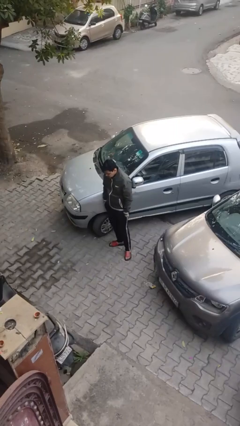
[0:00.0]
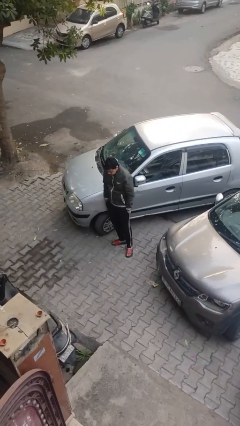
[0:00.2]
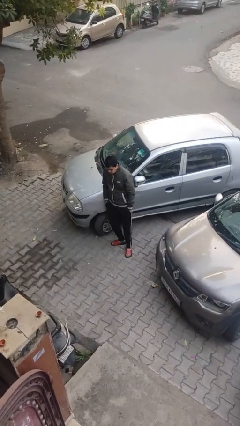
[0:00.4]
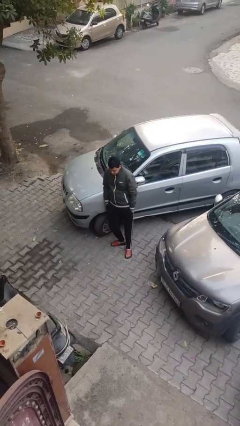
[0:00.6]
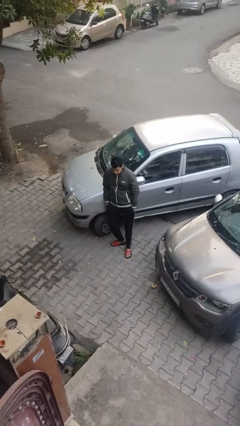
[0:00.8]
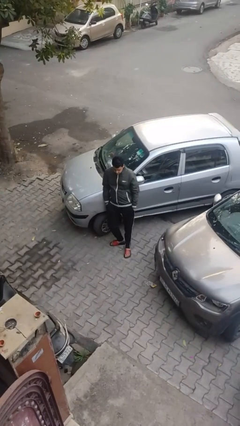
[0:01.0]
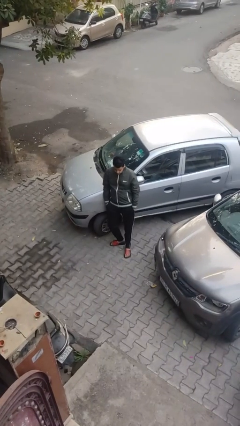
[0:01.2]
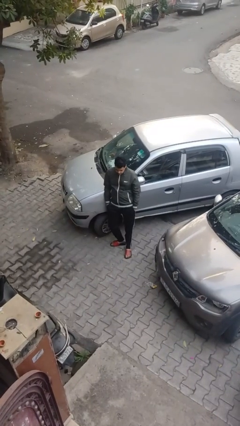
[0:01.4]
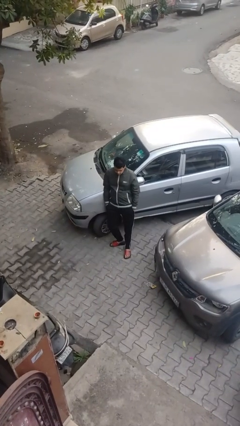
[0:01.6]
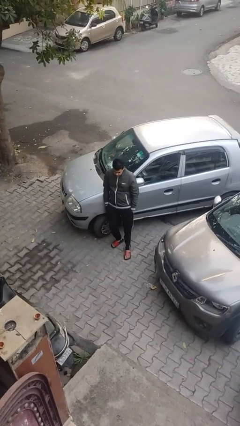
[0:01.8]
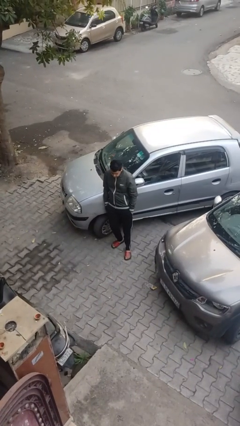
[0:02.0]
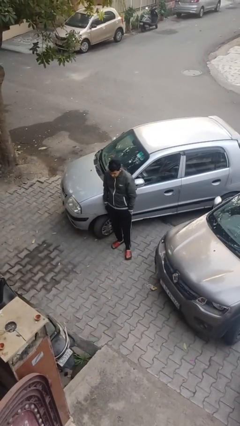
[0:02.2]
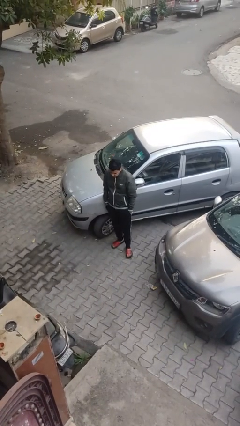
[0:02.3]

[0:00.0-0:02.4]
person leans against car

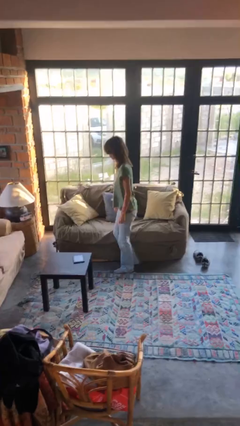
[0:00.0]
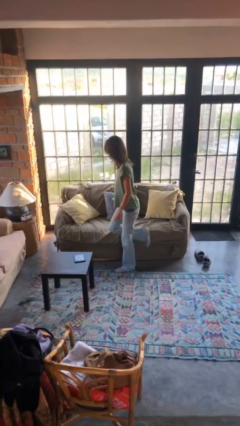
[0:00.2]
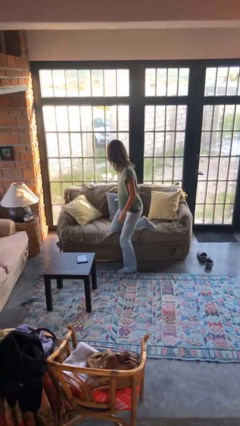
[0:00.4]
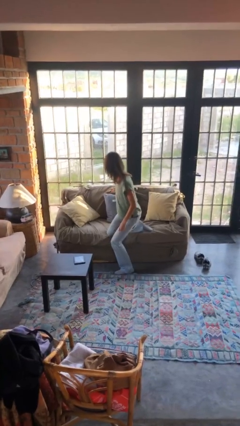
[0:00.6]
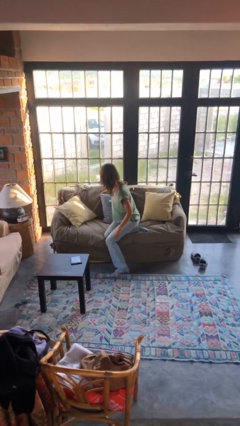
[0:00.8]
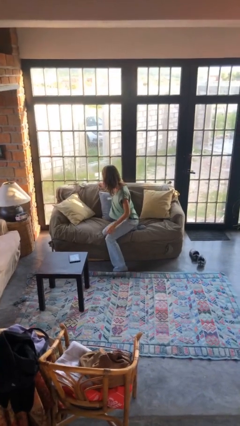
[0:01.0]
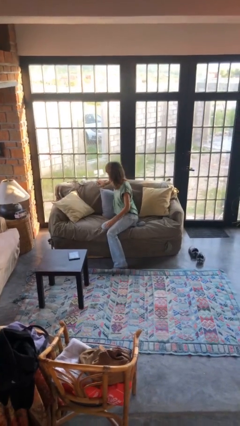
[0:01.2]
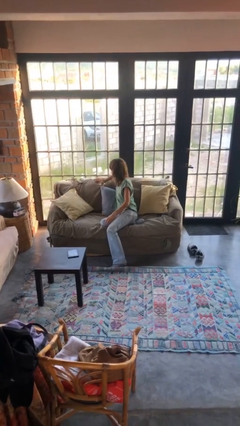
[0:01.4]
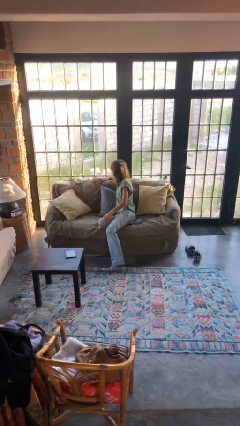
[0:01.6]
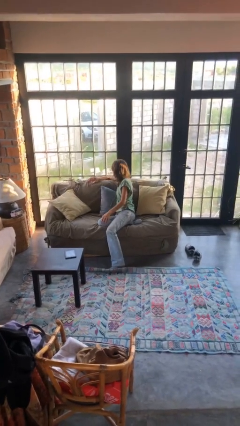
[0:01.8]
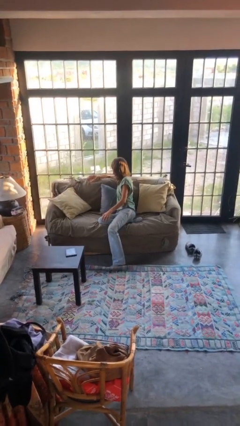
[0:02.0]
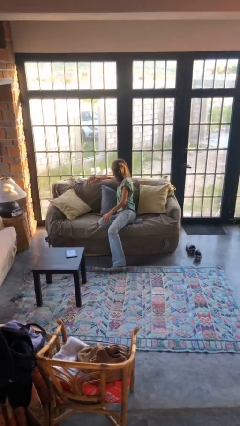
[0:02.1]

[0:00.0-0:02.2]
person lies down on couch

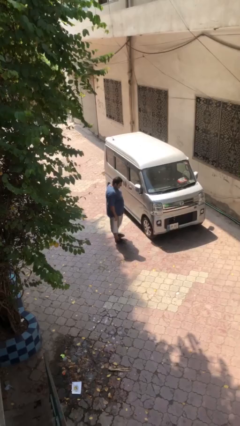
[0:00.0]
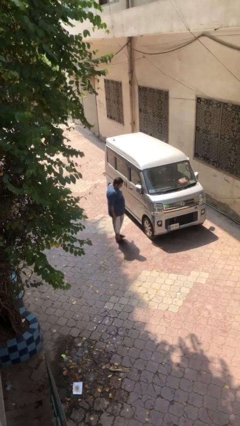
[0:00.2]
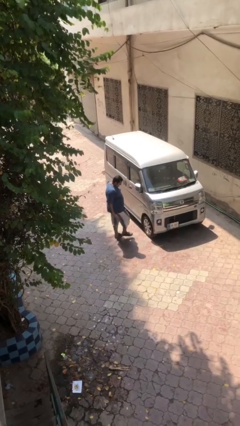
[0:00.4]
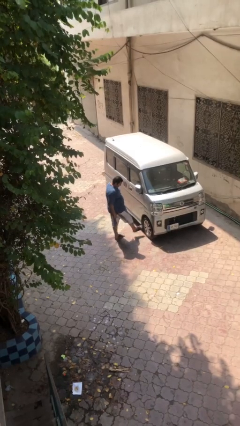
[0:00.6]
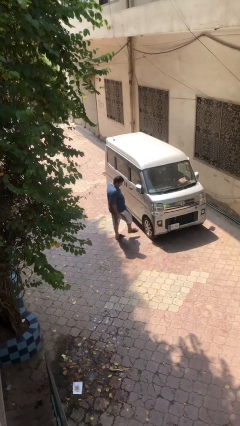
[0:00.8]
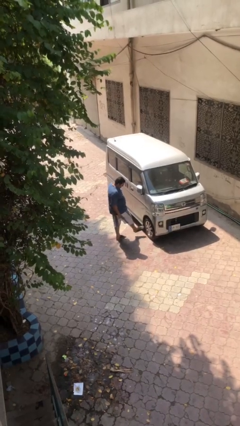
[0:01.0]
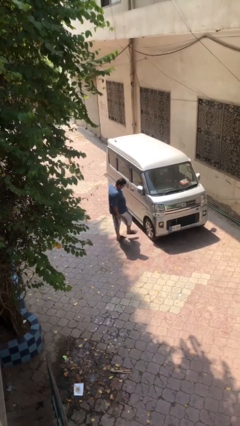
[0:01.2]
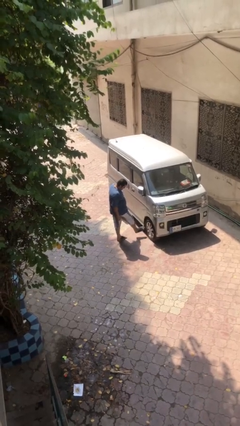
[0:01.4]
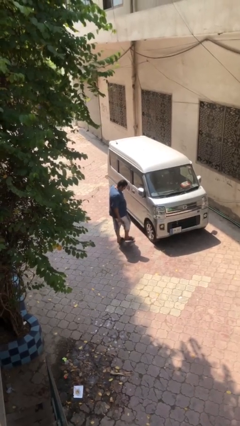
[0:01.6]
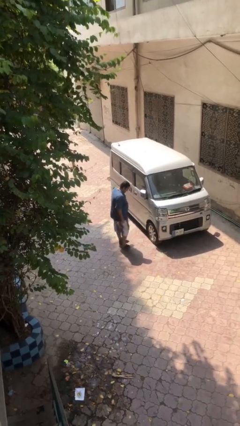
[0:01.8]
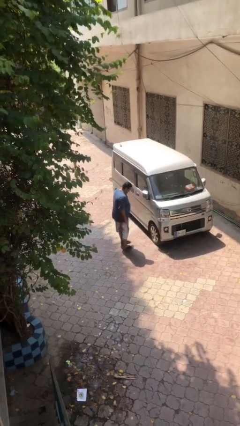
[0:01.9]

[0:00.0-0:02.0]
person kicks car tires

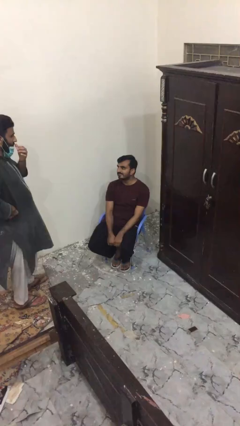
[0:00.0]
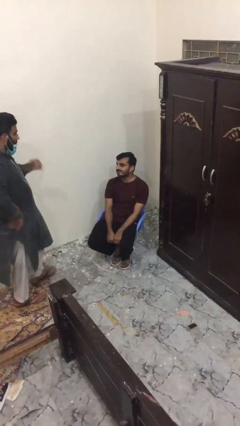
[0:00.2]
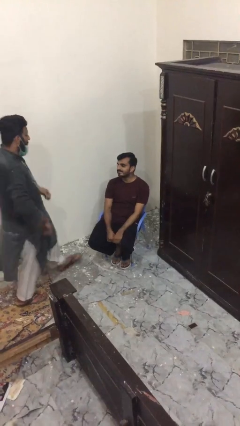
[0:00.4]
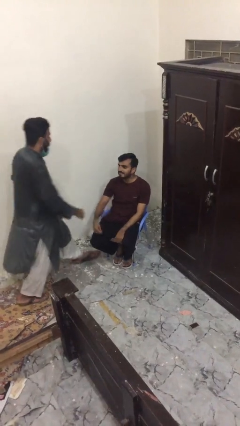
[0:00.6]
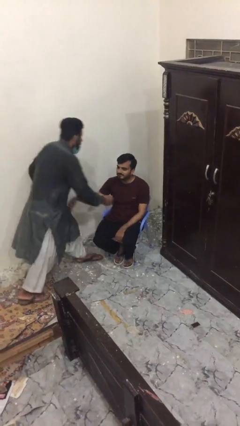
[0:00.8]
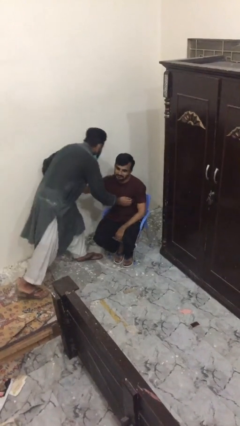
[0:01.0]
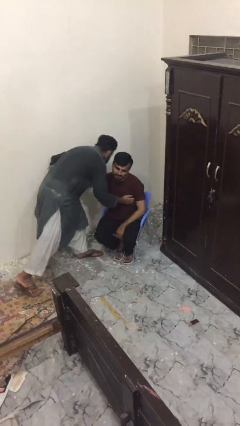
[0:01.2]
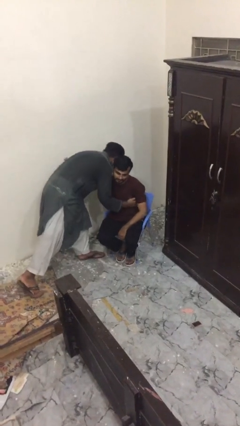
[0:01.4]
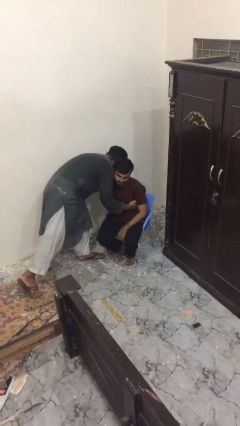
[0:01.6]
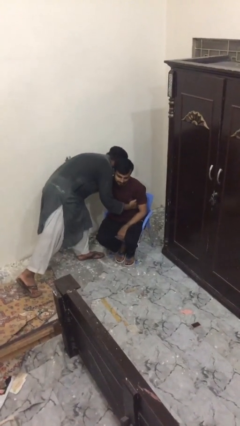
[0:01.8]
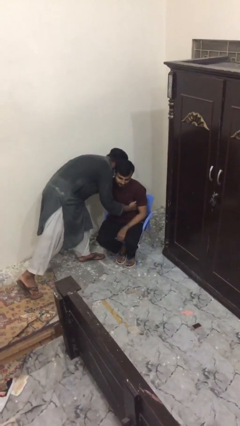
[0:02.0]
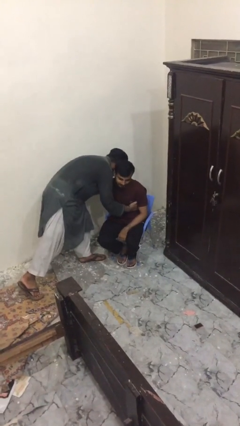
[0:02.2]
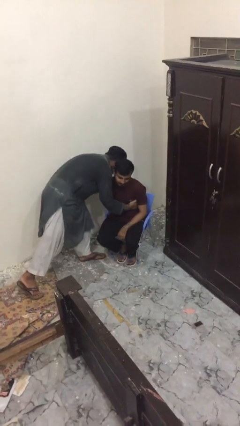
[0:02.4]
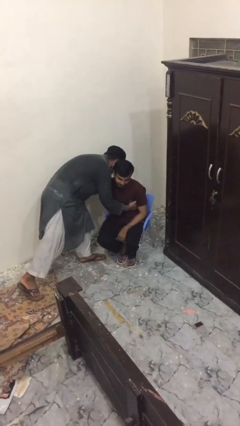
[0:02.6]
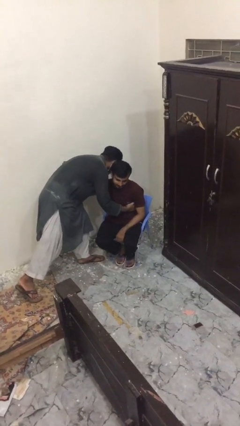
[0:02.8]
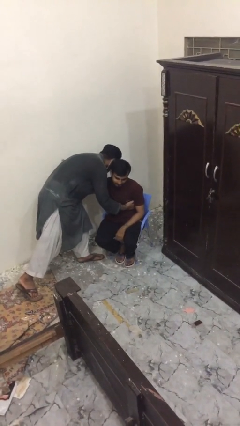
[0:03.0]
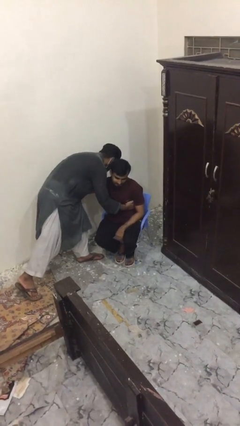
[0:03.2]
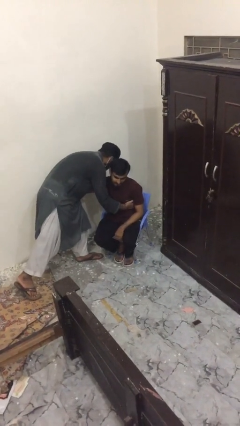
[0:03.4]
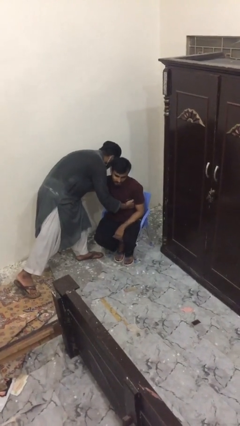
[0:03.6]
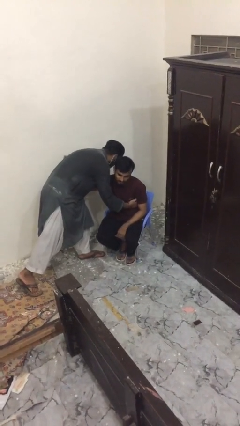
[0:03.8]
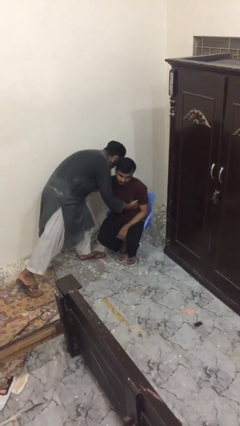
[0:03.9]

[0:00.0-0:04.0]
person embraces person

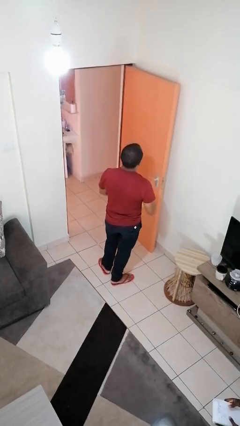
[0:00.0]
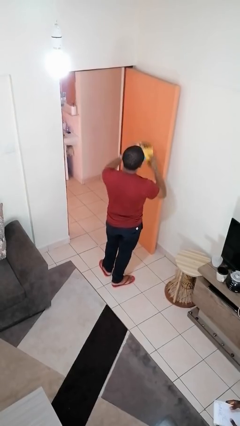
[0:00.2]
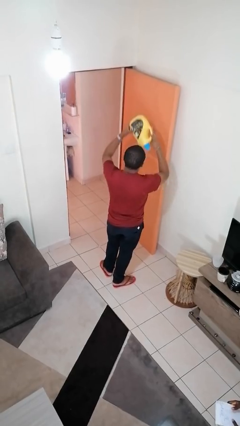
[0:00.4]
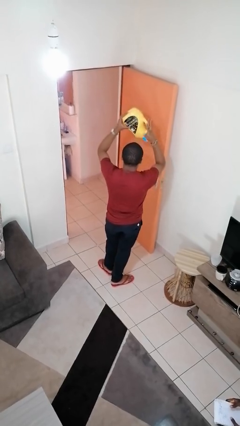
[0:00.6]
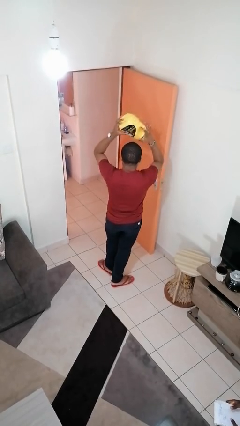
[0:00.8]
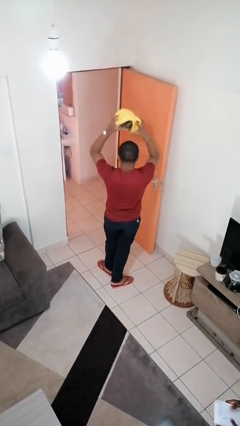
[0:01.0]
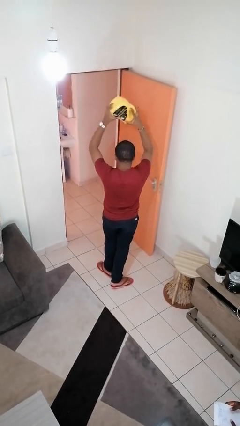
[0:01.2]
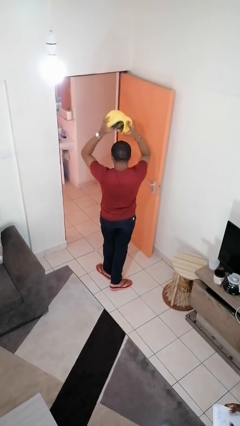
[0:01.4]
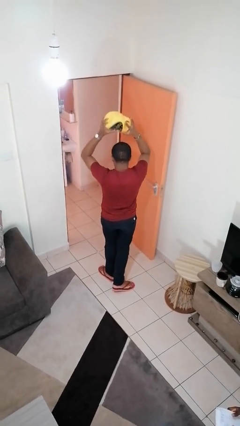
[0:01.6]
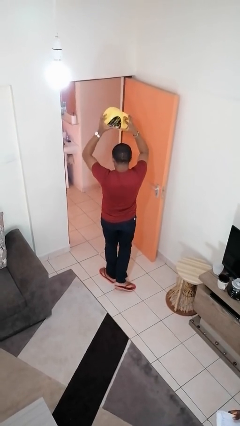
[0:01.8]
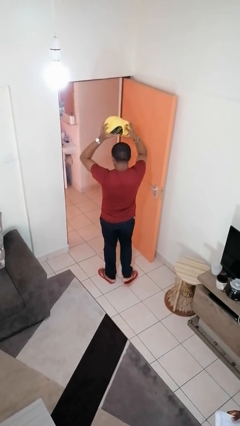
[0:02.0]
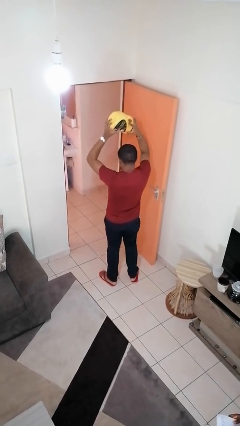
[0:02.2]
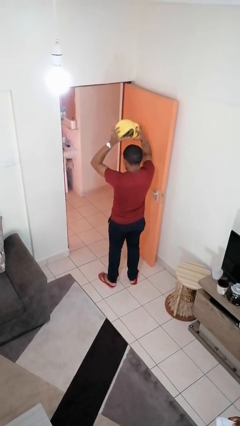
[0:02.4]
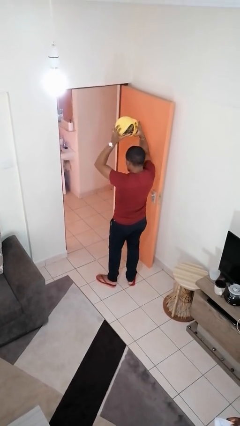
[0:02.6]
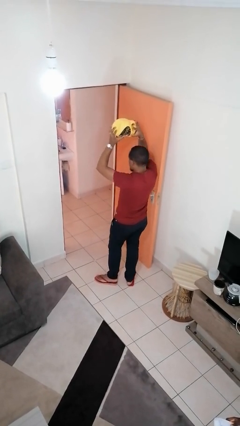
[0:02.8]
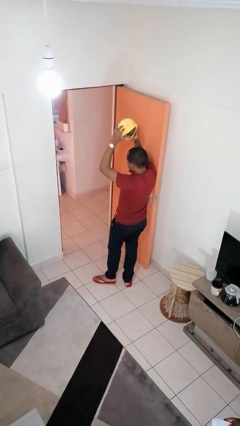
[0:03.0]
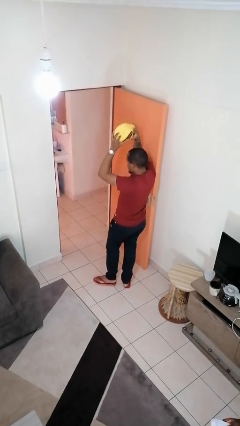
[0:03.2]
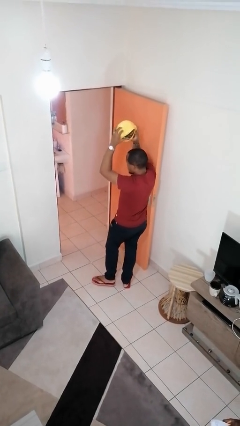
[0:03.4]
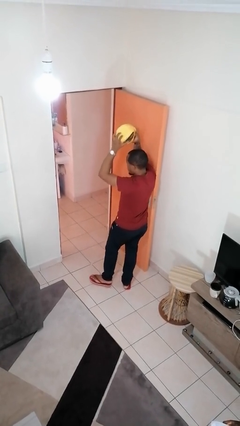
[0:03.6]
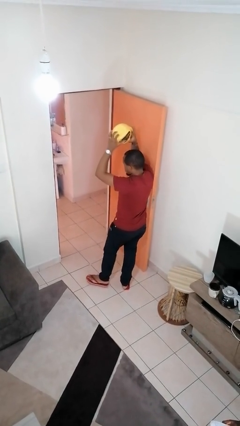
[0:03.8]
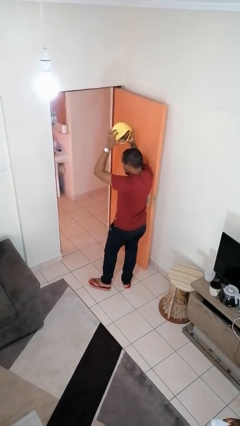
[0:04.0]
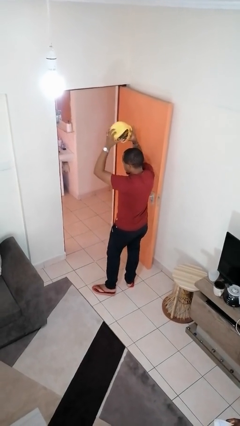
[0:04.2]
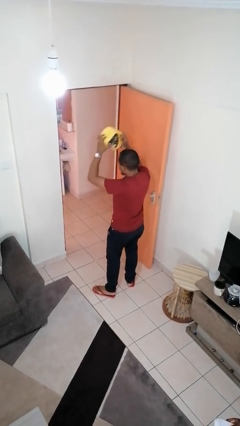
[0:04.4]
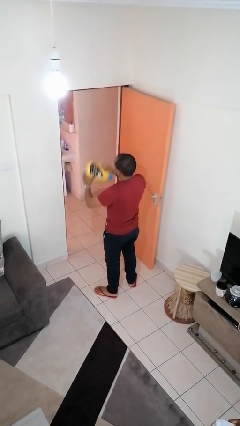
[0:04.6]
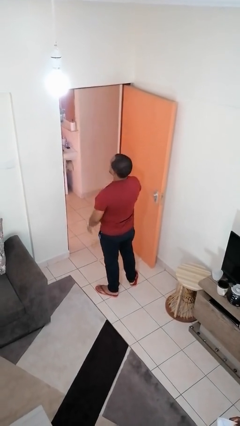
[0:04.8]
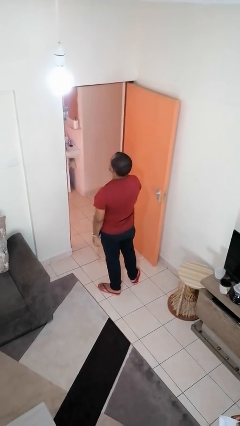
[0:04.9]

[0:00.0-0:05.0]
person holds object above head

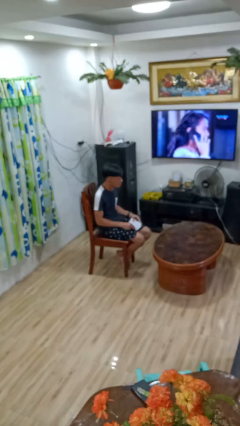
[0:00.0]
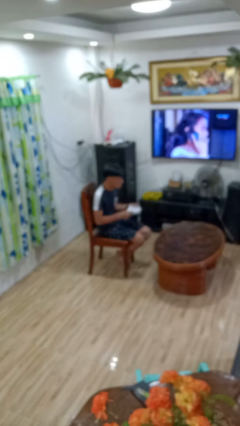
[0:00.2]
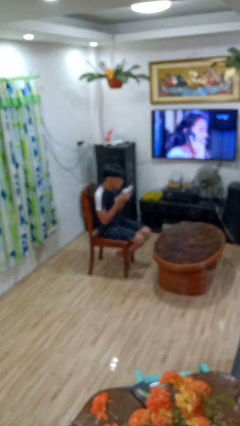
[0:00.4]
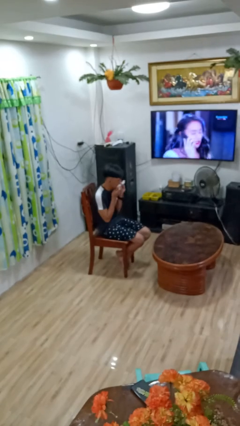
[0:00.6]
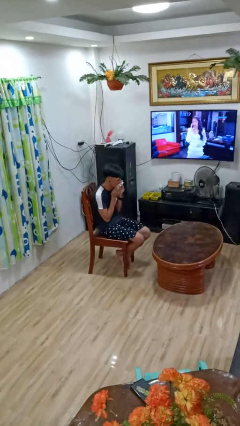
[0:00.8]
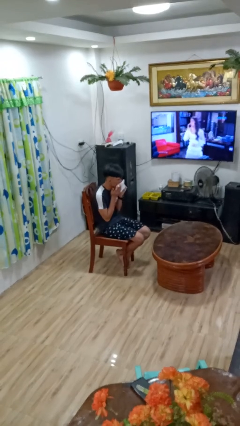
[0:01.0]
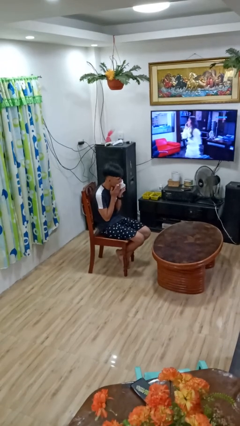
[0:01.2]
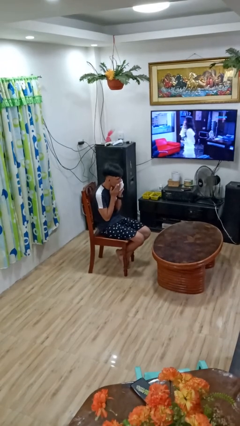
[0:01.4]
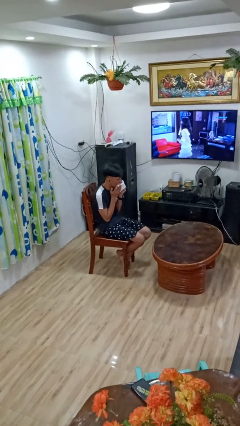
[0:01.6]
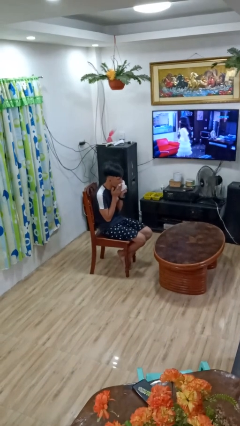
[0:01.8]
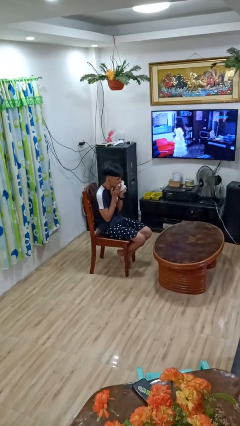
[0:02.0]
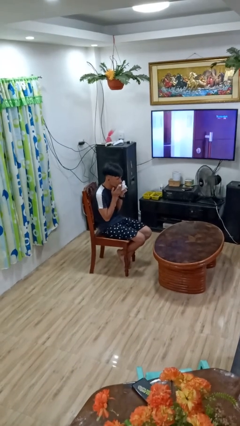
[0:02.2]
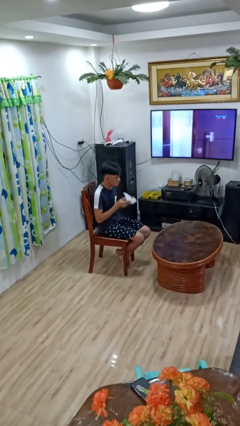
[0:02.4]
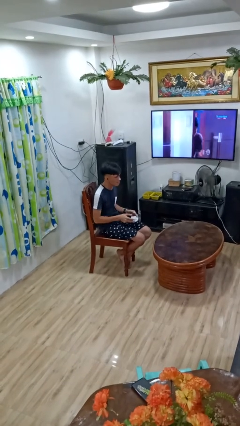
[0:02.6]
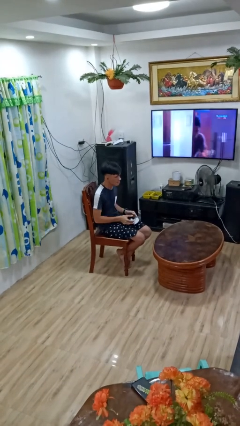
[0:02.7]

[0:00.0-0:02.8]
person wipes mouth with napkin
